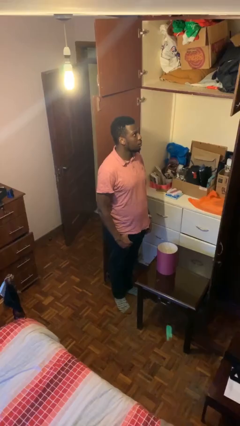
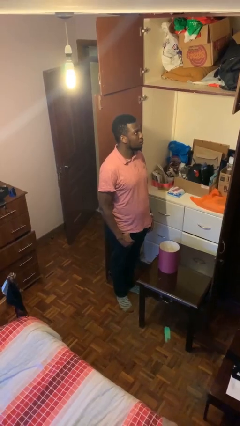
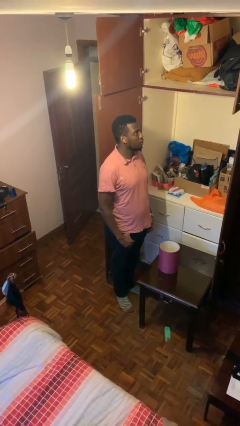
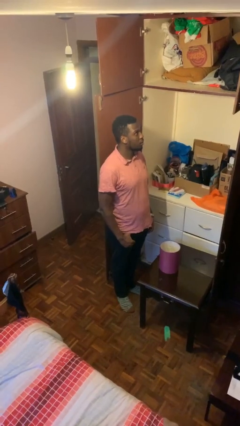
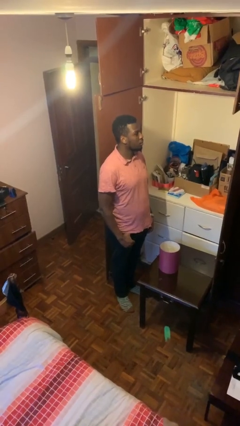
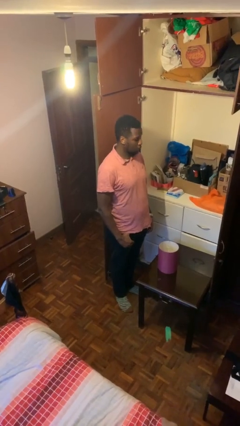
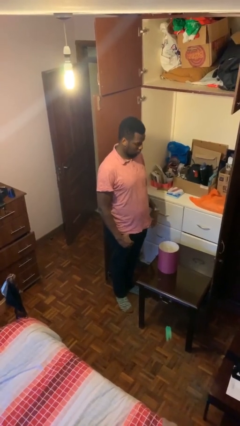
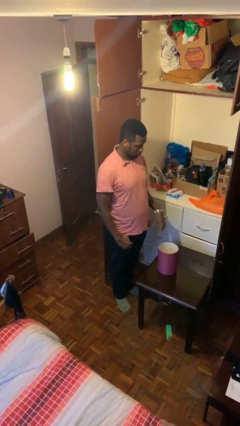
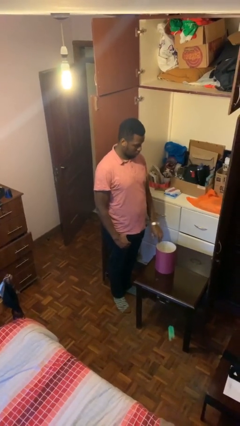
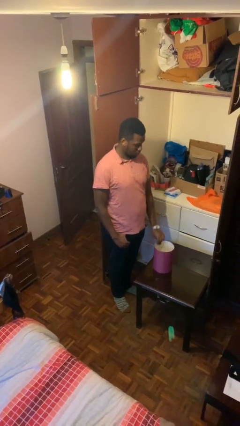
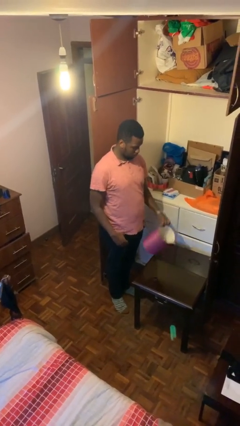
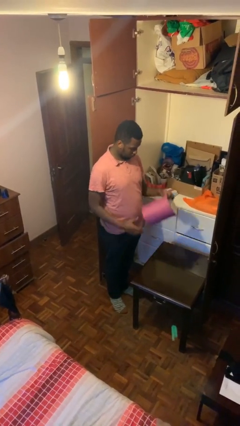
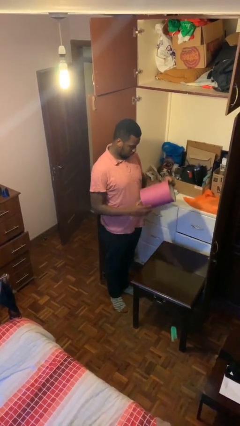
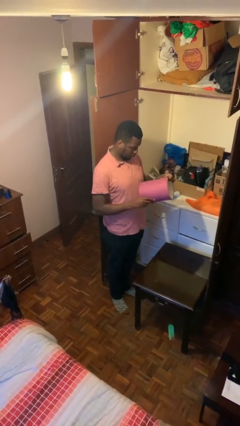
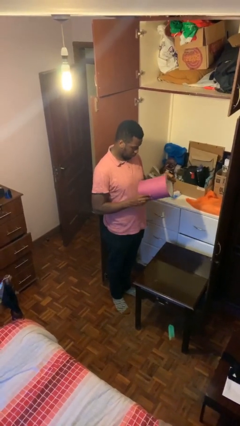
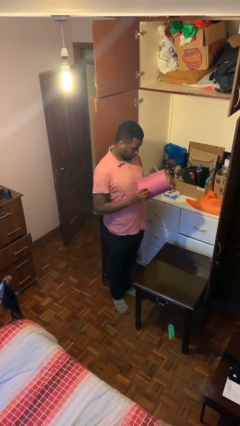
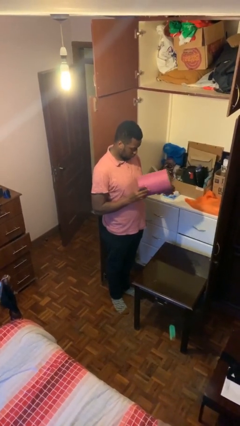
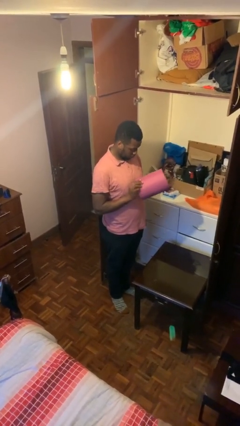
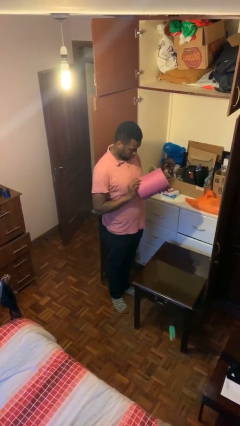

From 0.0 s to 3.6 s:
person picks up object from table

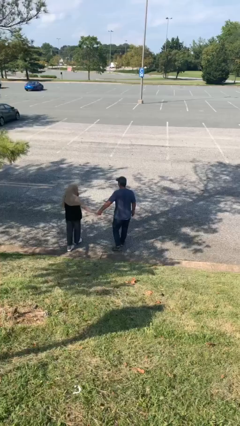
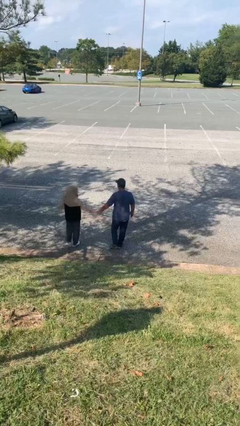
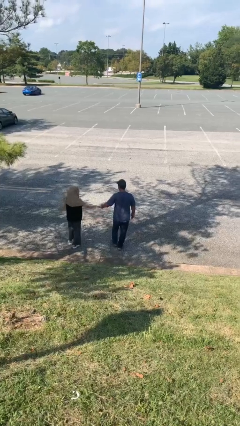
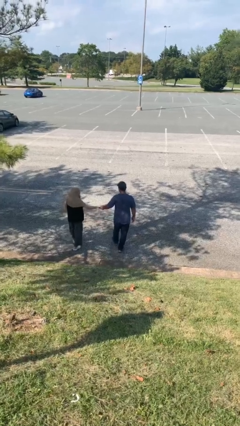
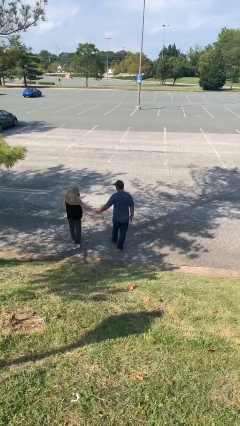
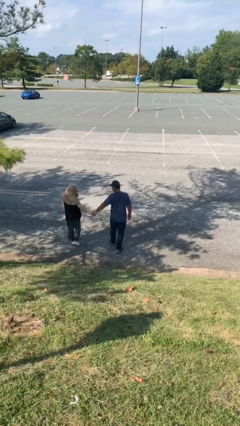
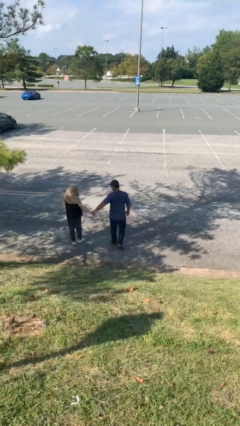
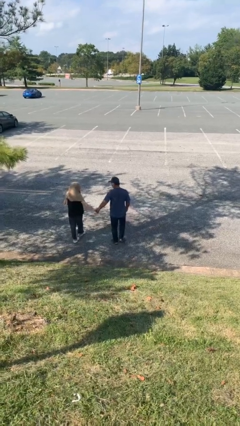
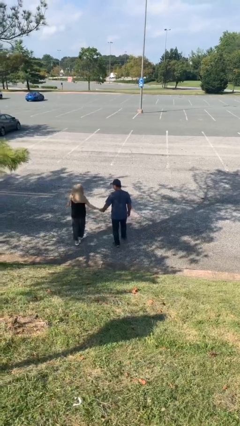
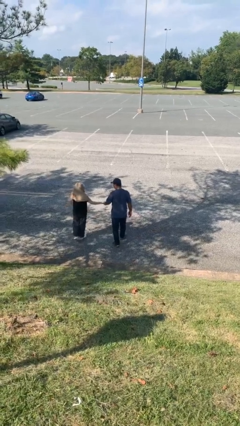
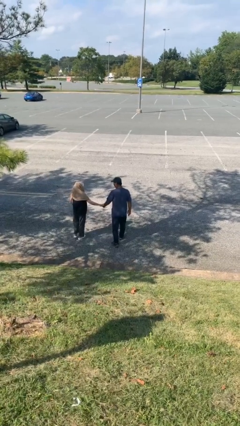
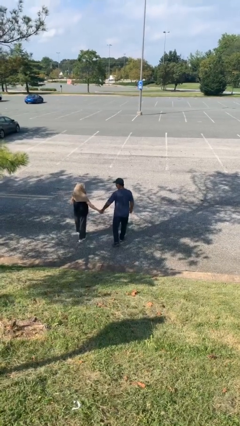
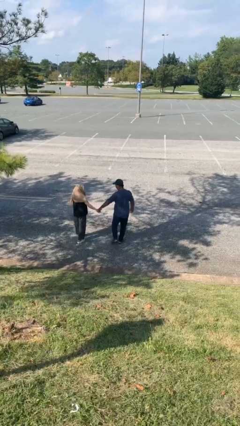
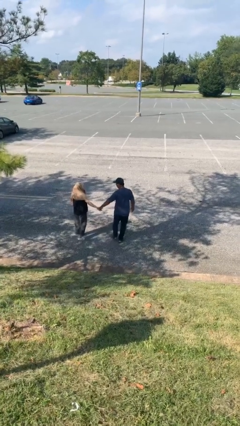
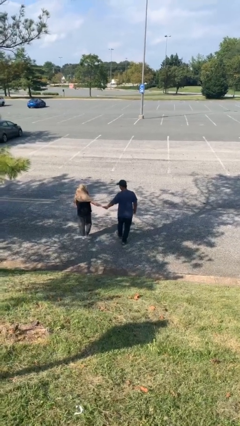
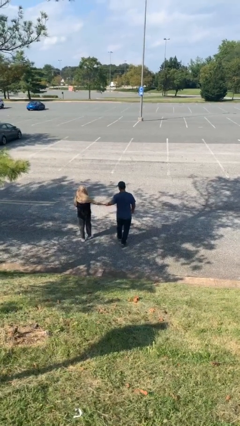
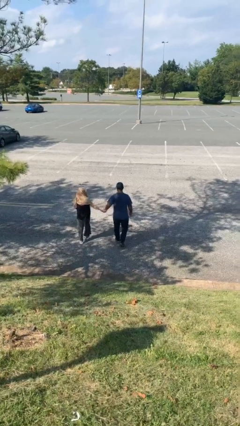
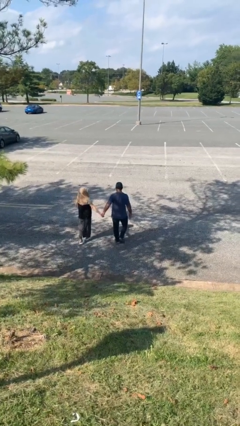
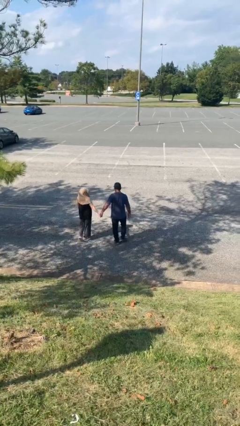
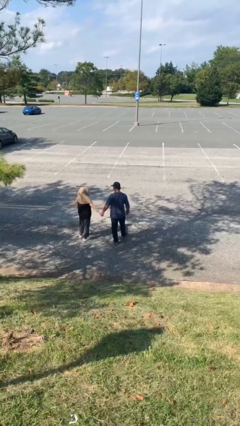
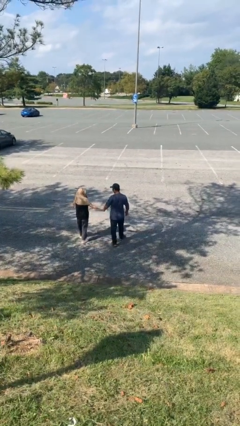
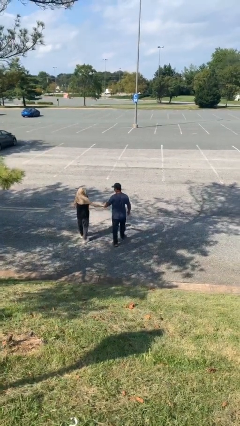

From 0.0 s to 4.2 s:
person holds hand

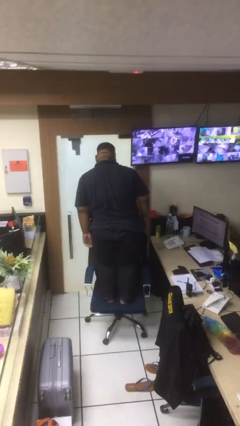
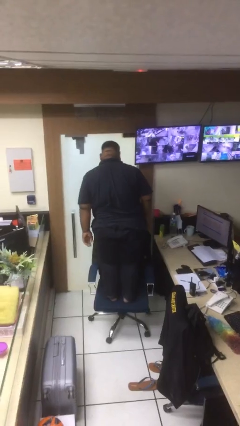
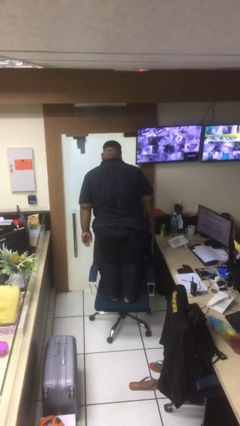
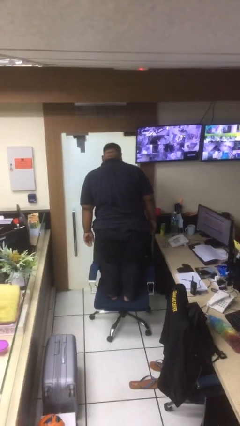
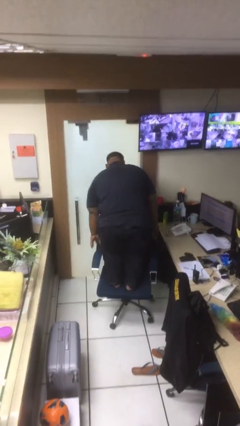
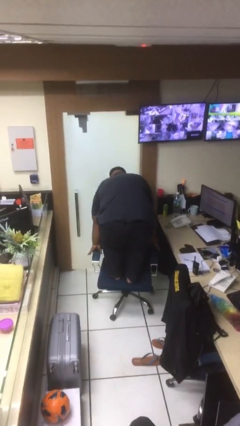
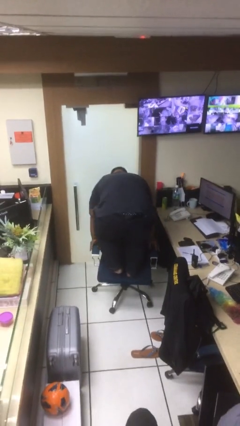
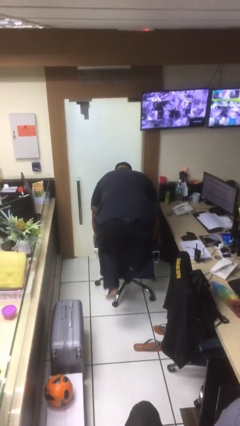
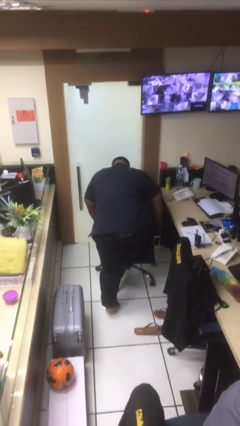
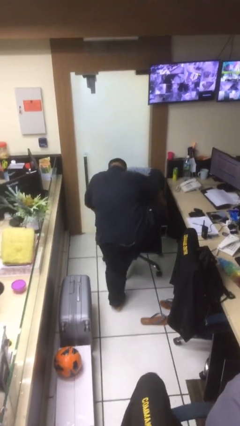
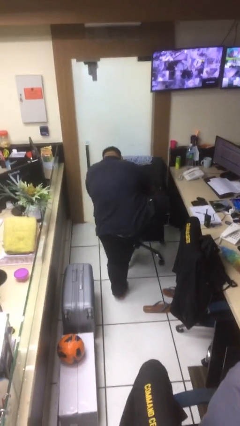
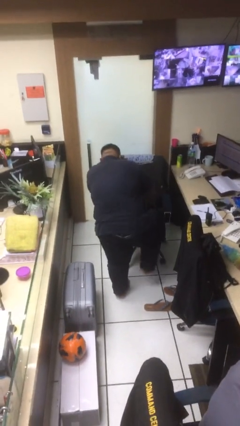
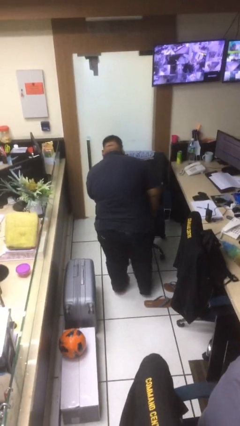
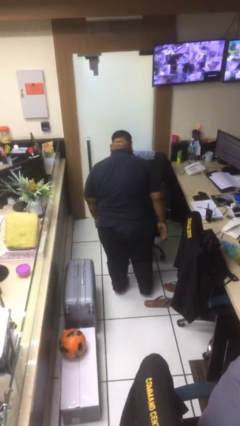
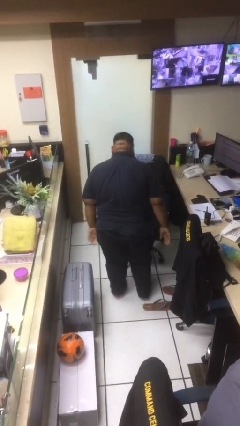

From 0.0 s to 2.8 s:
person climbs off chair

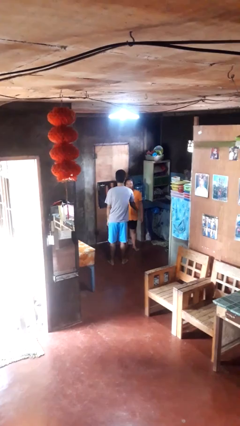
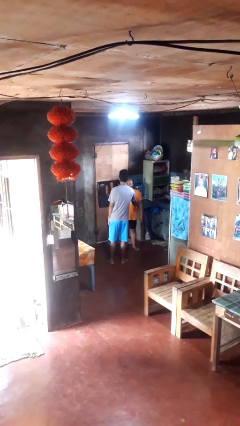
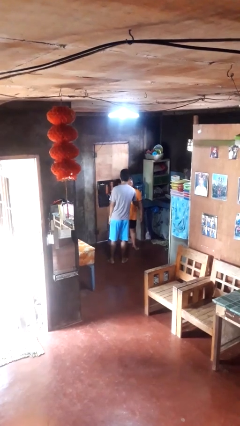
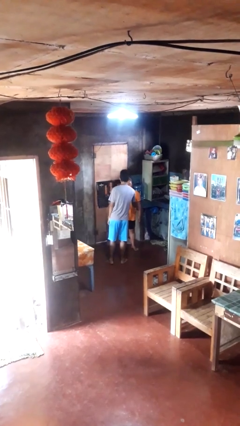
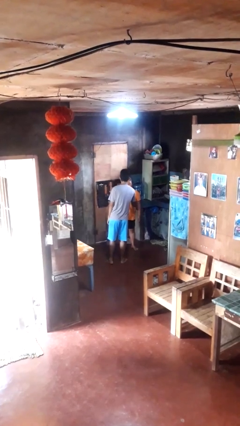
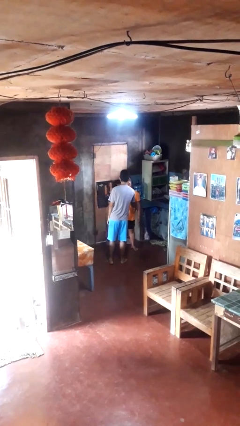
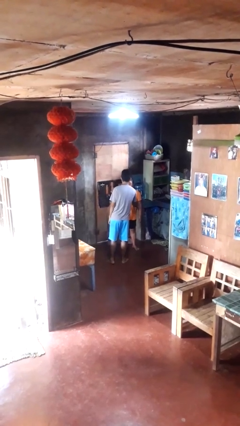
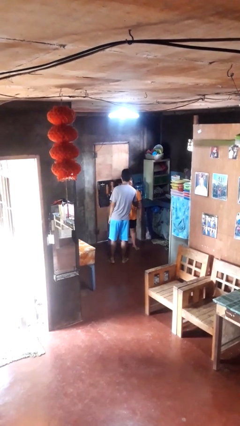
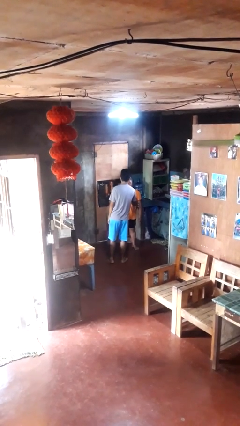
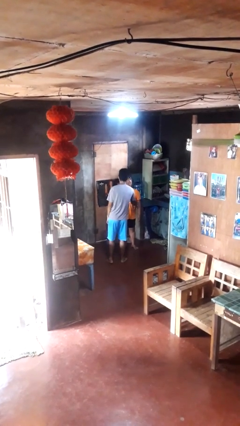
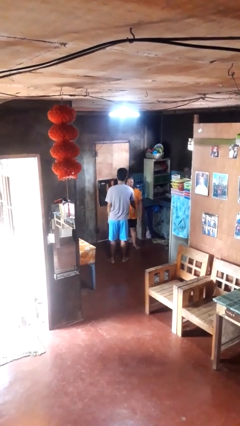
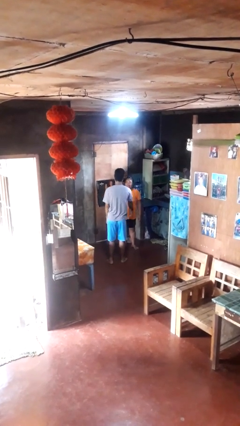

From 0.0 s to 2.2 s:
person tickles person

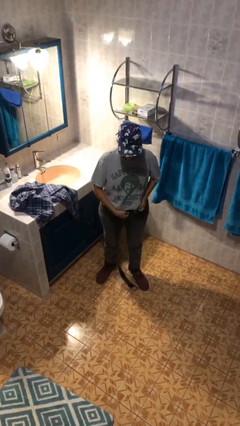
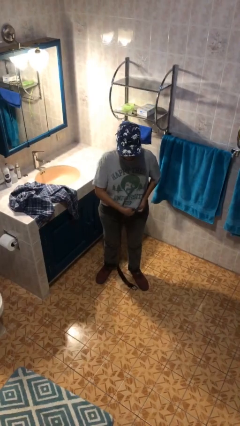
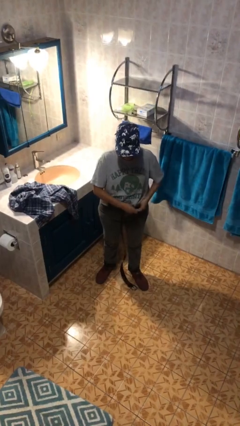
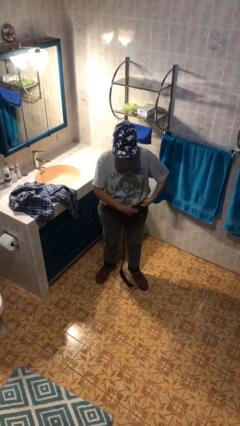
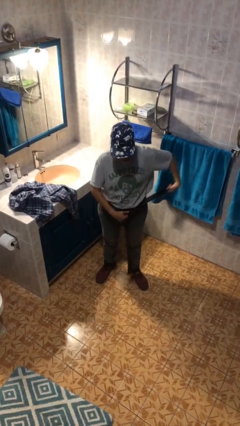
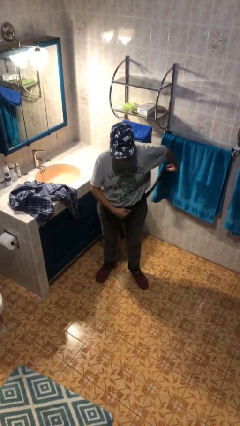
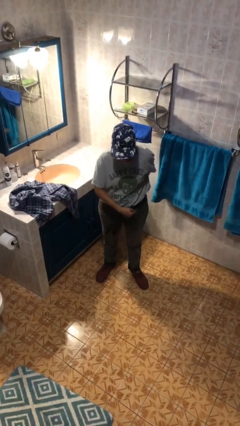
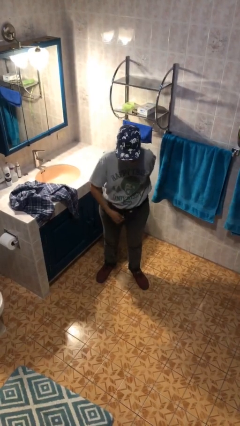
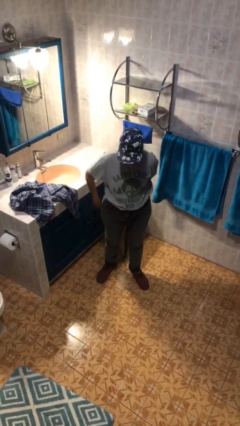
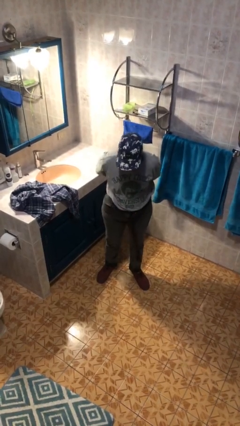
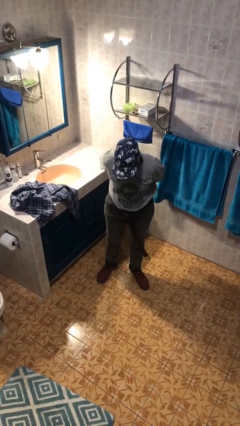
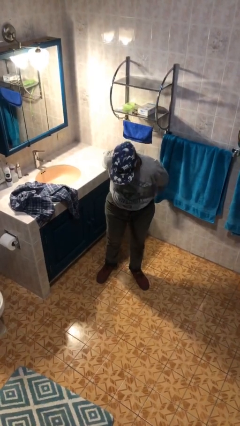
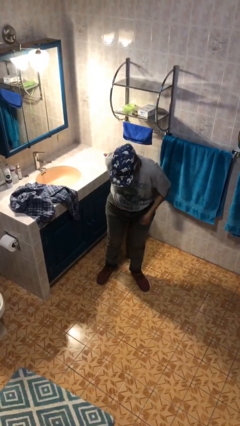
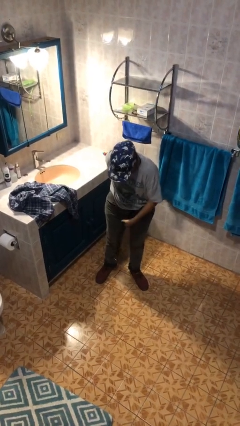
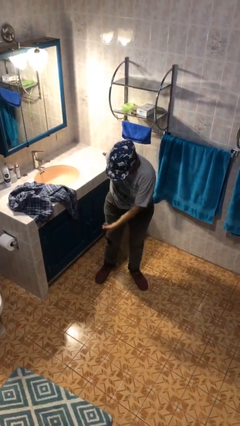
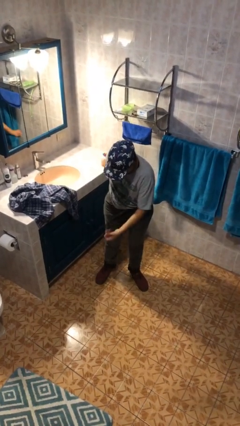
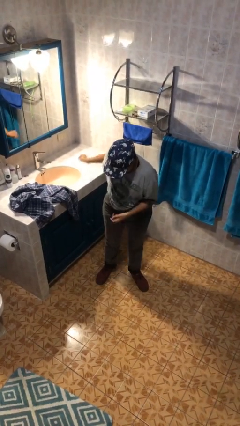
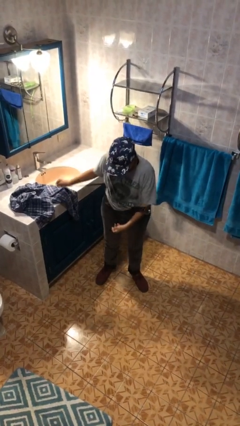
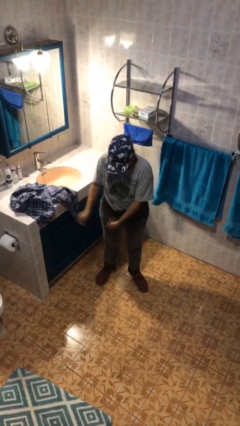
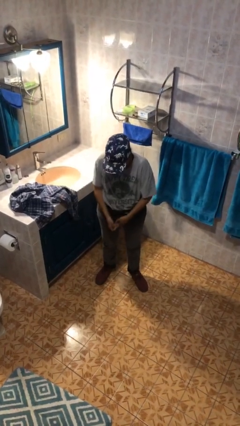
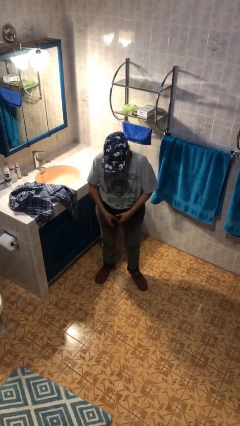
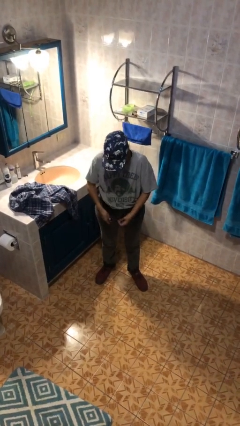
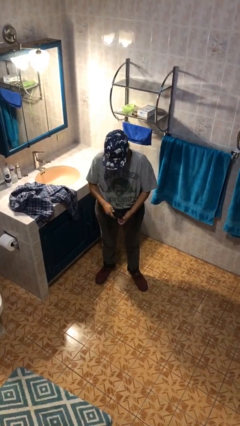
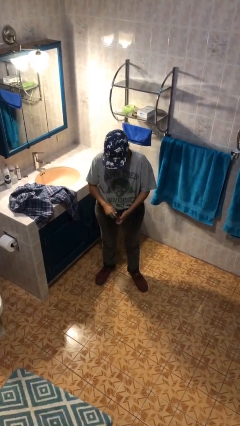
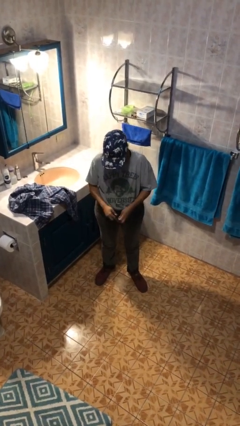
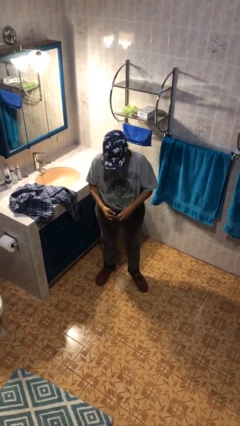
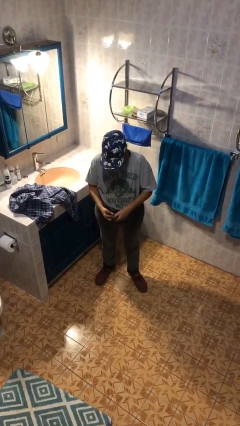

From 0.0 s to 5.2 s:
person puts on belt
